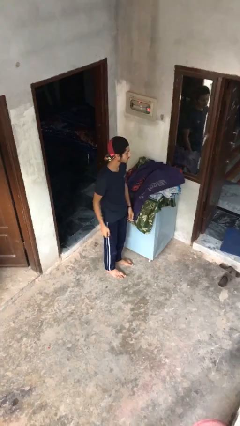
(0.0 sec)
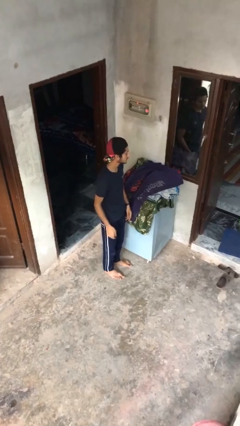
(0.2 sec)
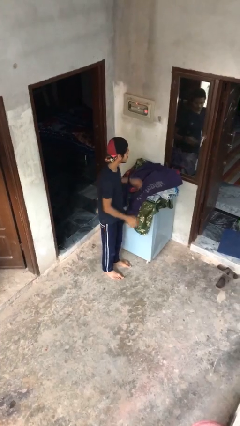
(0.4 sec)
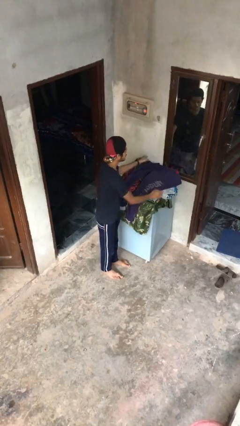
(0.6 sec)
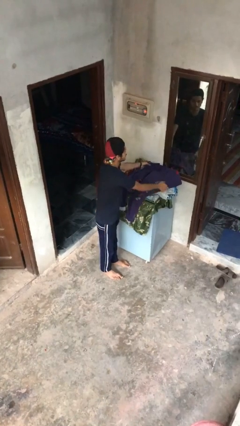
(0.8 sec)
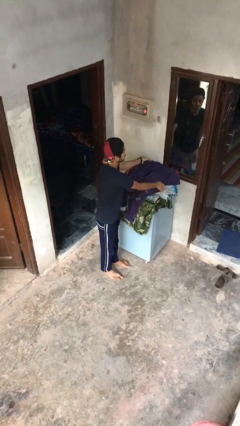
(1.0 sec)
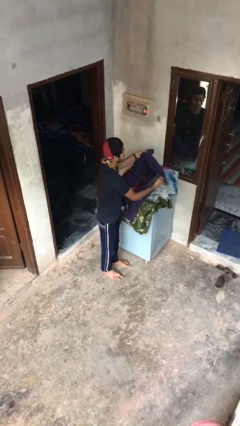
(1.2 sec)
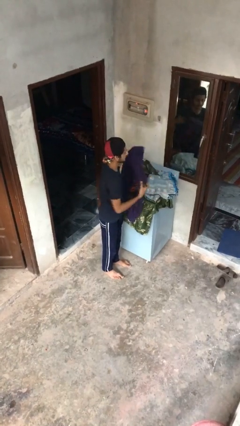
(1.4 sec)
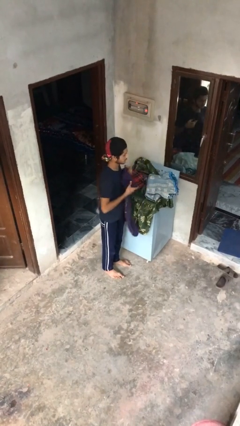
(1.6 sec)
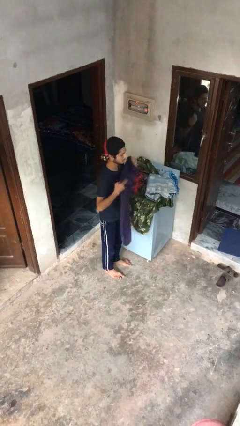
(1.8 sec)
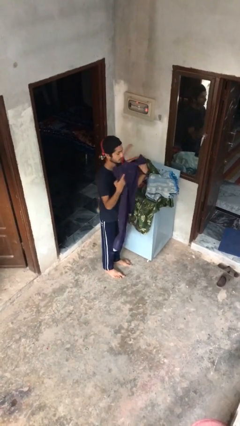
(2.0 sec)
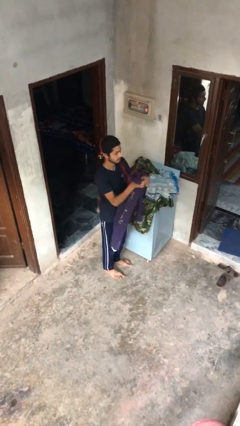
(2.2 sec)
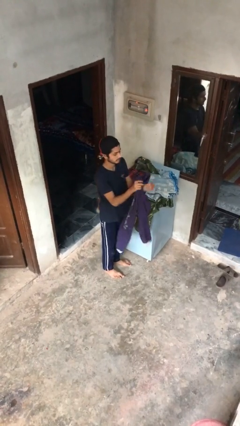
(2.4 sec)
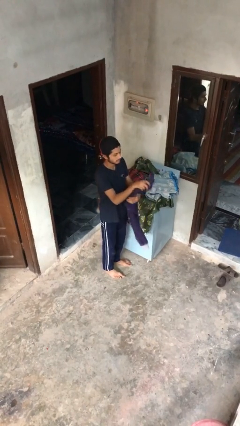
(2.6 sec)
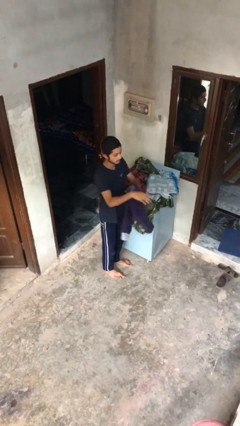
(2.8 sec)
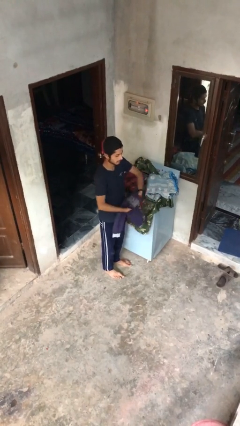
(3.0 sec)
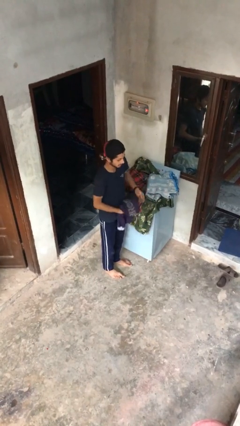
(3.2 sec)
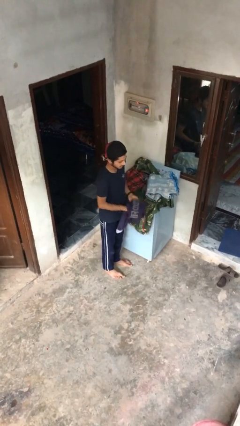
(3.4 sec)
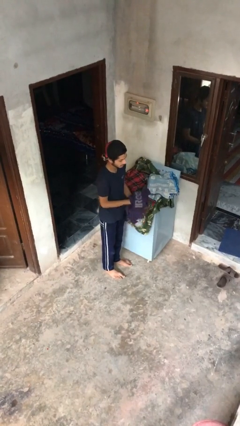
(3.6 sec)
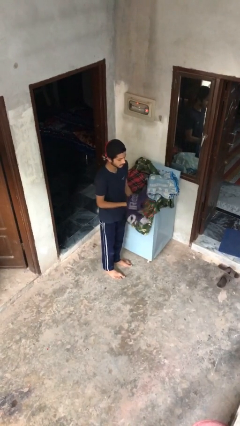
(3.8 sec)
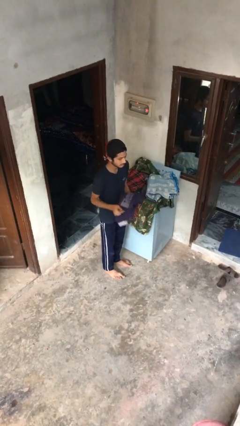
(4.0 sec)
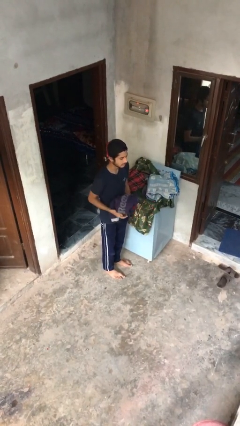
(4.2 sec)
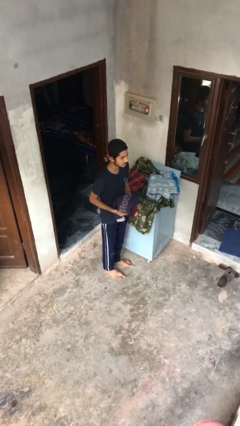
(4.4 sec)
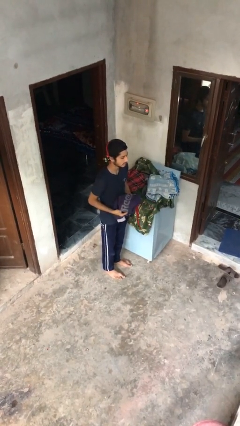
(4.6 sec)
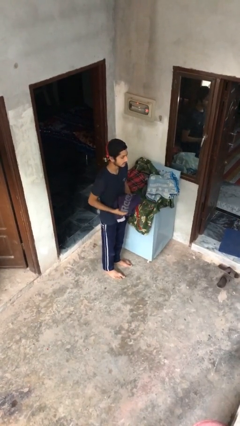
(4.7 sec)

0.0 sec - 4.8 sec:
person folds pants

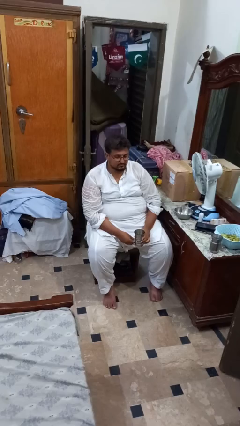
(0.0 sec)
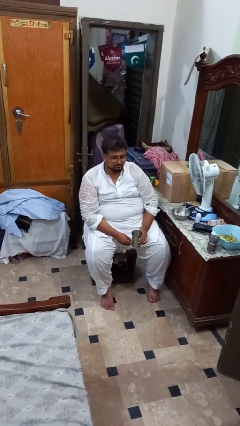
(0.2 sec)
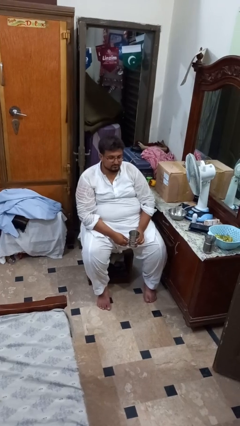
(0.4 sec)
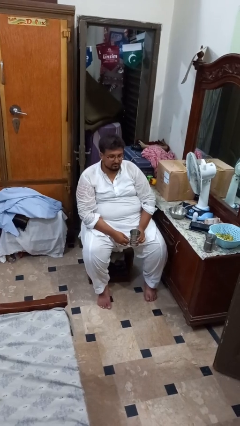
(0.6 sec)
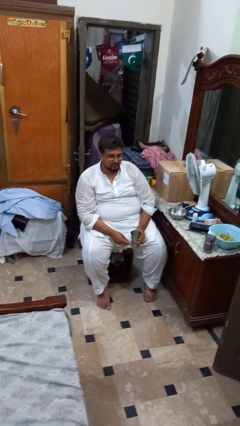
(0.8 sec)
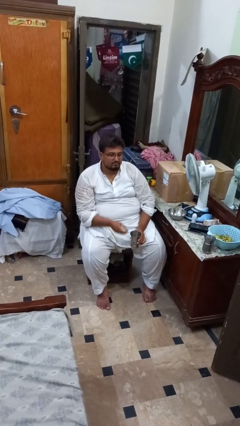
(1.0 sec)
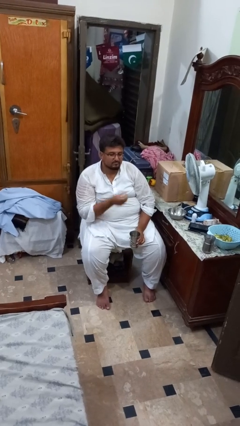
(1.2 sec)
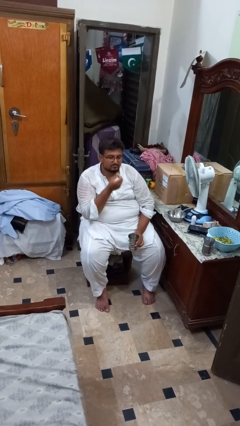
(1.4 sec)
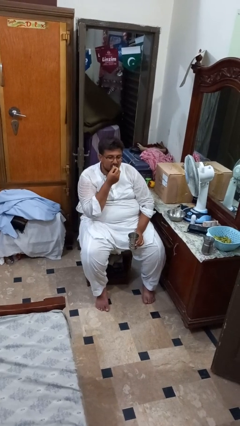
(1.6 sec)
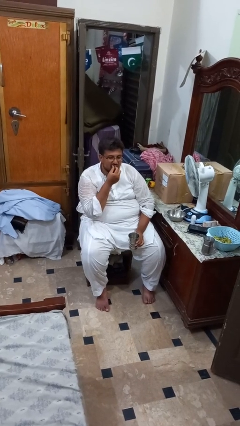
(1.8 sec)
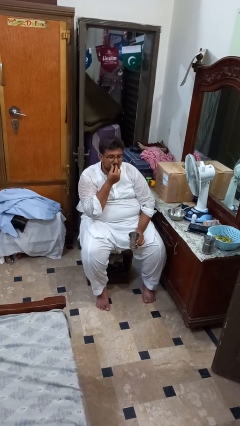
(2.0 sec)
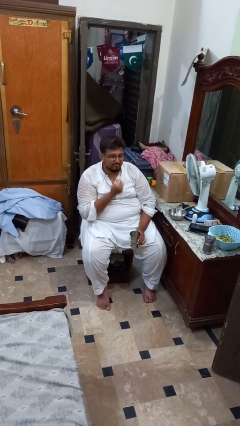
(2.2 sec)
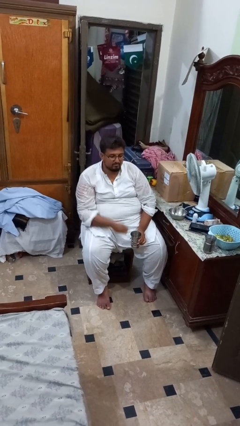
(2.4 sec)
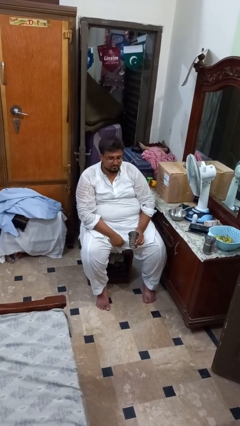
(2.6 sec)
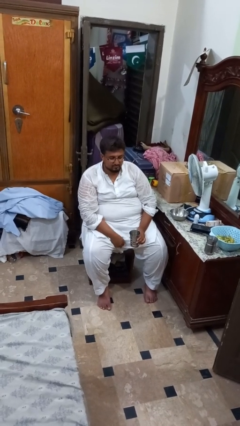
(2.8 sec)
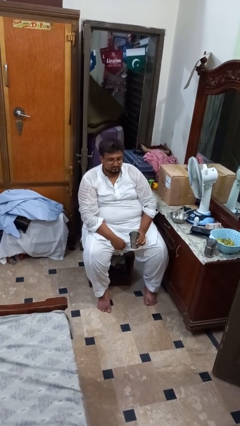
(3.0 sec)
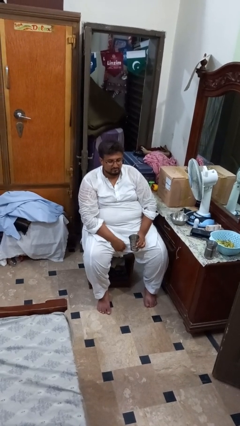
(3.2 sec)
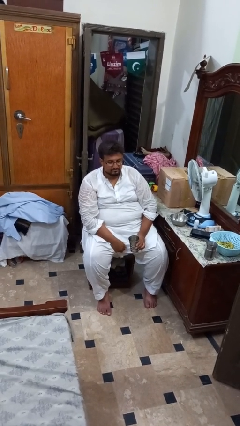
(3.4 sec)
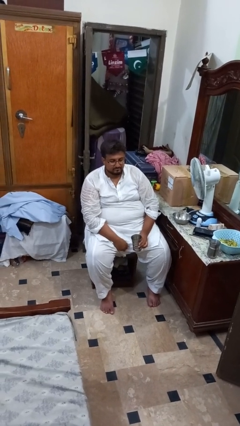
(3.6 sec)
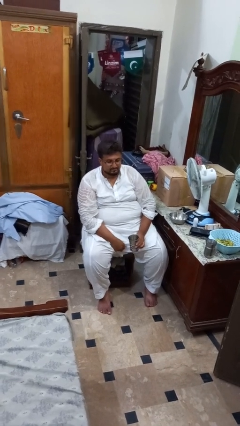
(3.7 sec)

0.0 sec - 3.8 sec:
person takes medicine pills

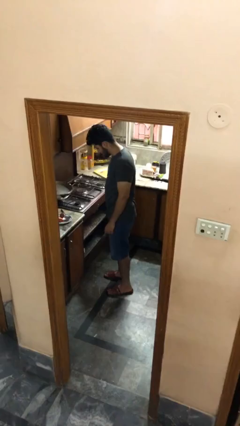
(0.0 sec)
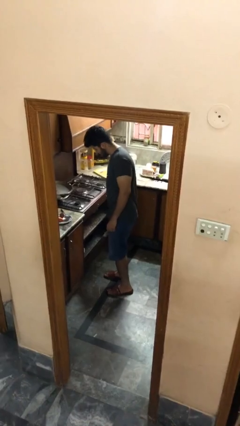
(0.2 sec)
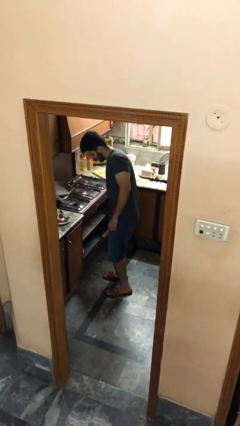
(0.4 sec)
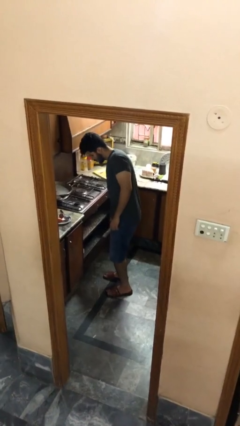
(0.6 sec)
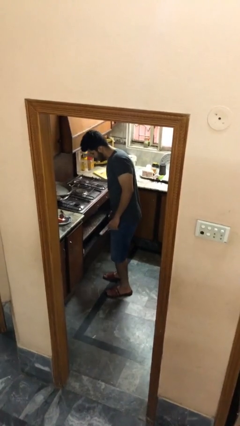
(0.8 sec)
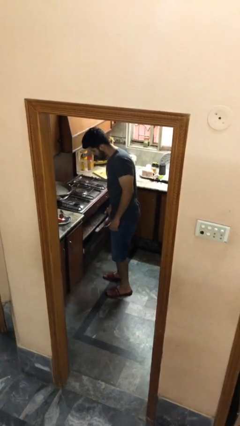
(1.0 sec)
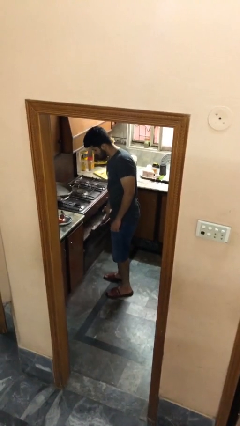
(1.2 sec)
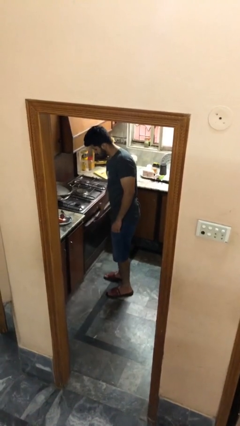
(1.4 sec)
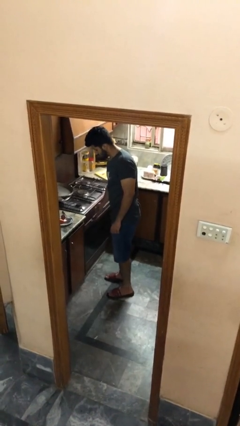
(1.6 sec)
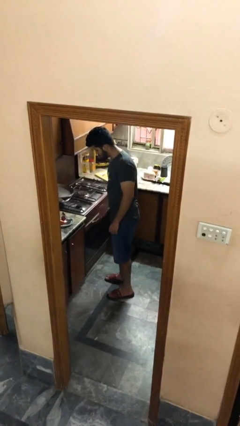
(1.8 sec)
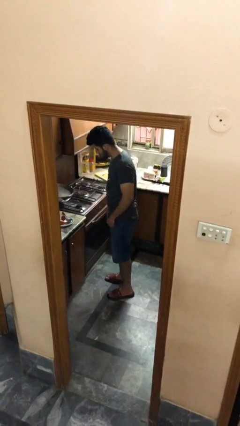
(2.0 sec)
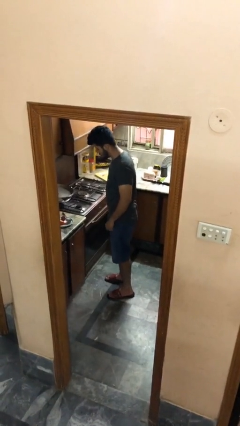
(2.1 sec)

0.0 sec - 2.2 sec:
person closes oven door

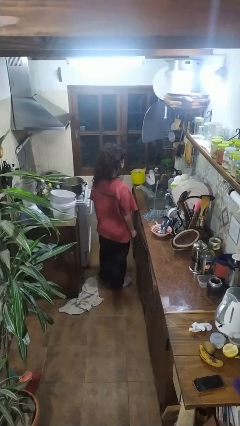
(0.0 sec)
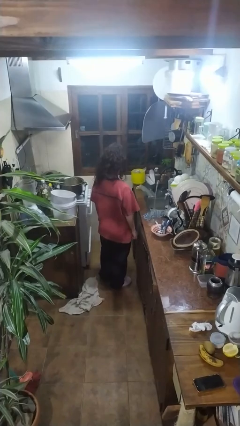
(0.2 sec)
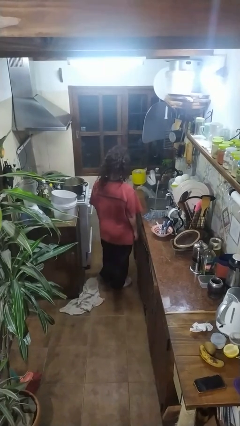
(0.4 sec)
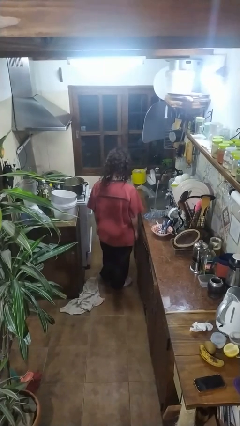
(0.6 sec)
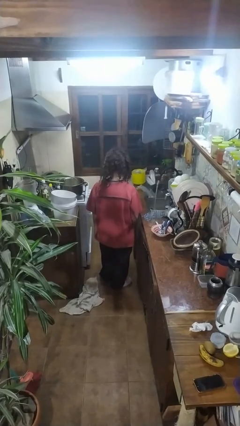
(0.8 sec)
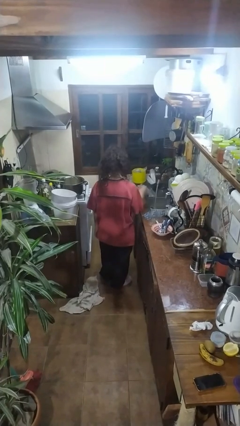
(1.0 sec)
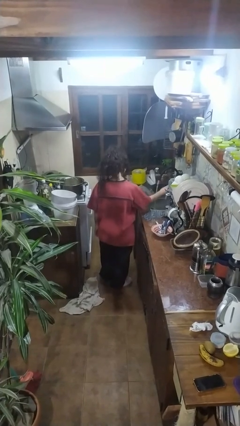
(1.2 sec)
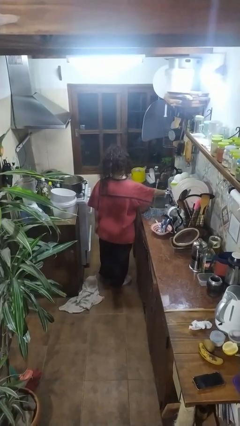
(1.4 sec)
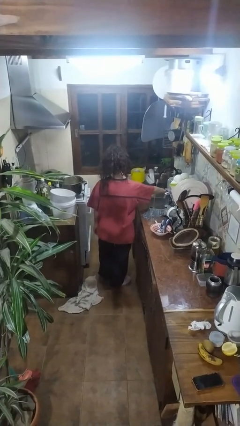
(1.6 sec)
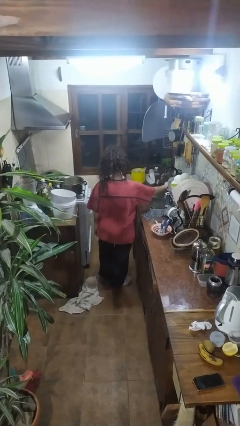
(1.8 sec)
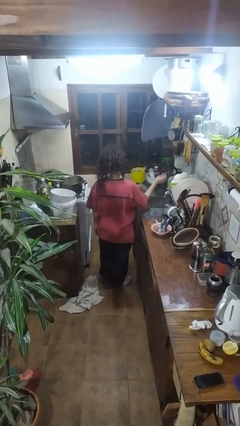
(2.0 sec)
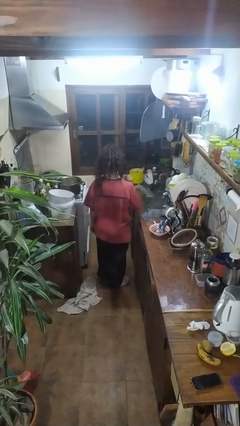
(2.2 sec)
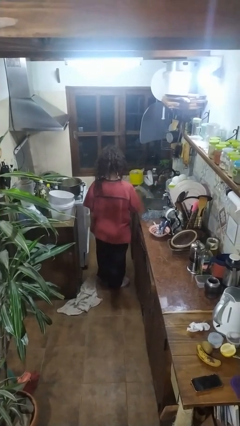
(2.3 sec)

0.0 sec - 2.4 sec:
person closes clothes washer

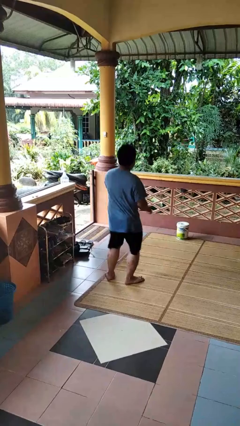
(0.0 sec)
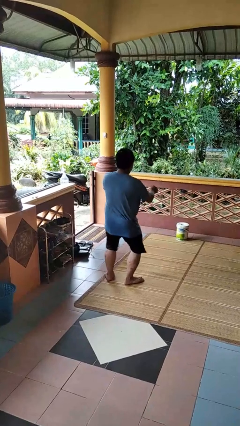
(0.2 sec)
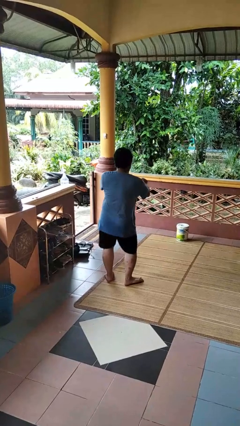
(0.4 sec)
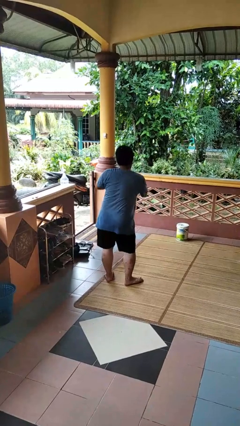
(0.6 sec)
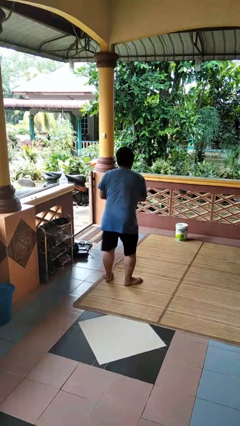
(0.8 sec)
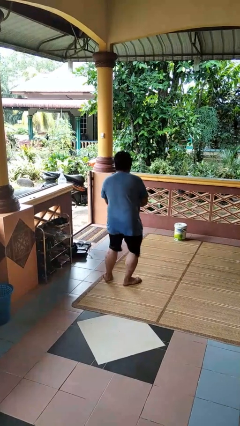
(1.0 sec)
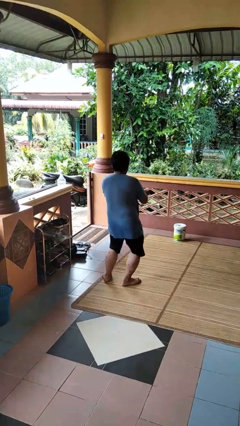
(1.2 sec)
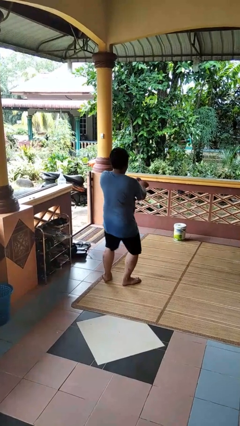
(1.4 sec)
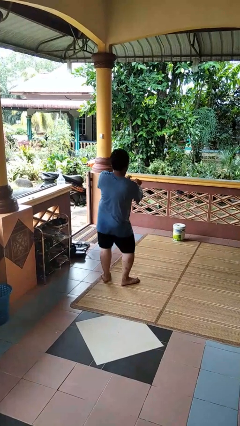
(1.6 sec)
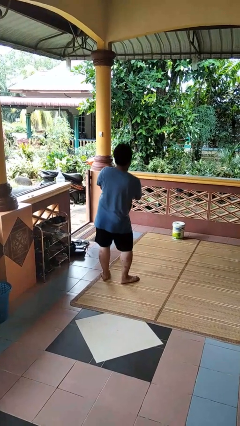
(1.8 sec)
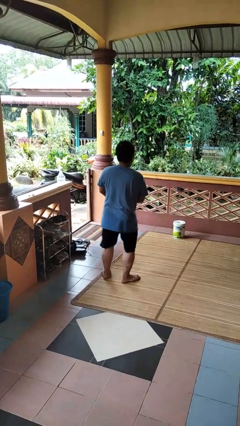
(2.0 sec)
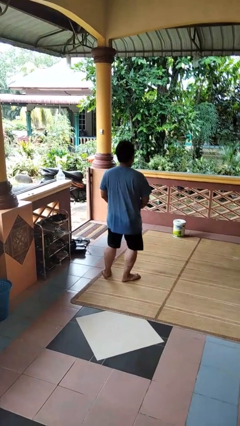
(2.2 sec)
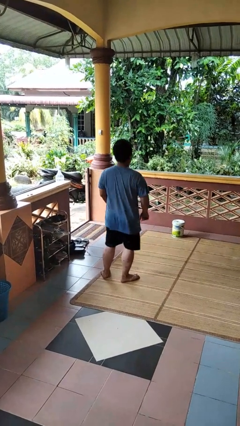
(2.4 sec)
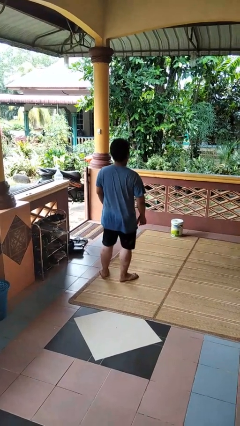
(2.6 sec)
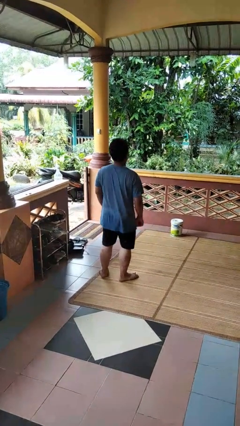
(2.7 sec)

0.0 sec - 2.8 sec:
person dances in place

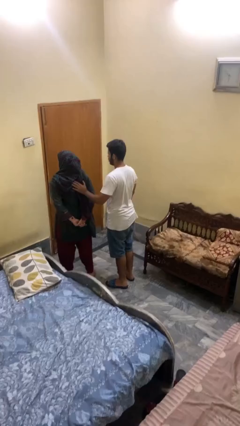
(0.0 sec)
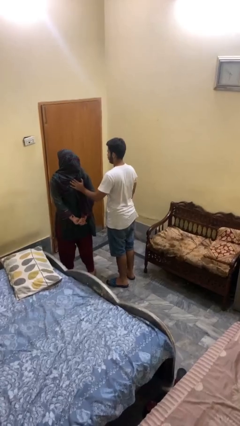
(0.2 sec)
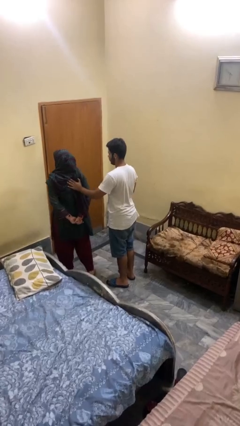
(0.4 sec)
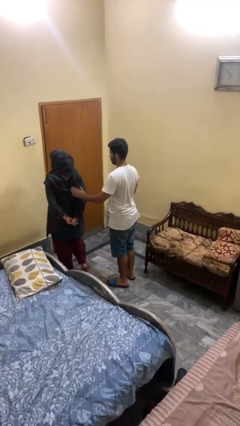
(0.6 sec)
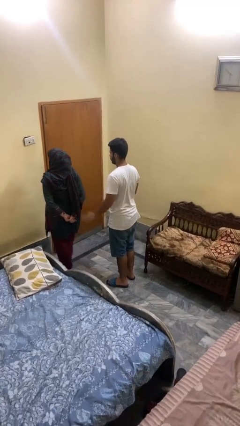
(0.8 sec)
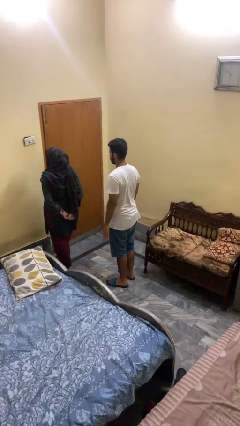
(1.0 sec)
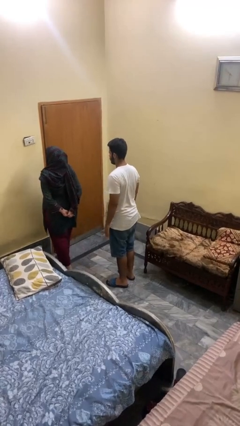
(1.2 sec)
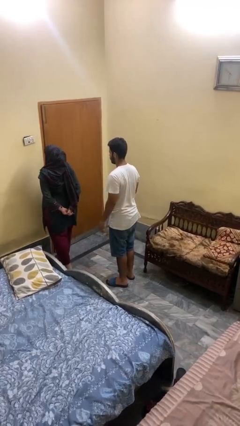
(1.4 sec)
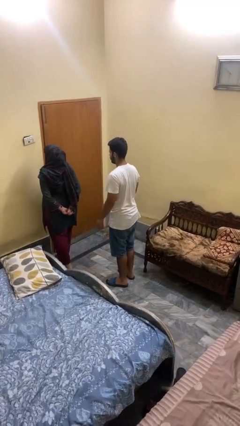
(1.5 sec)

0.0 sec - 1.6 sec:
person shoves person

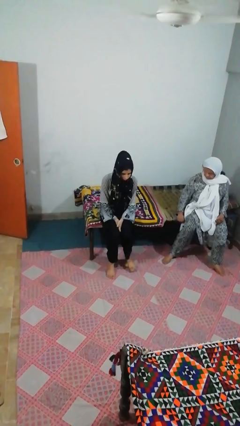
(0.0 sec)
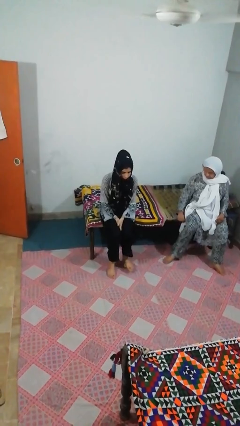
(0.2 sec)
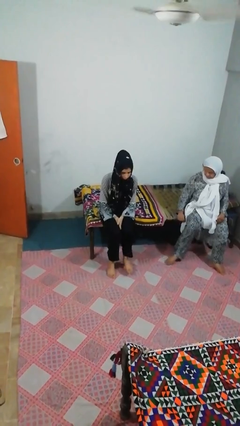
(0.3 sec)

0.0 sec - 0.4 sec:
person kicks object to person
